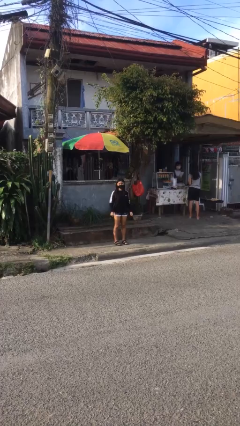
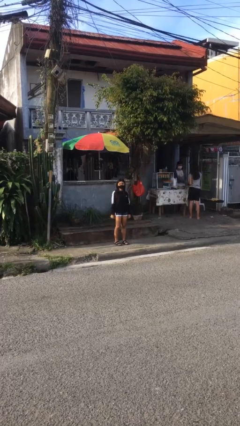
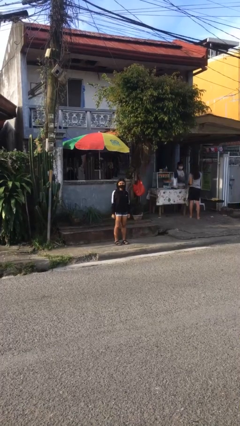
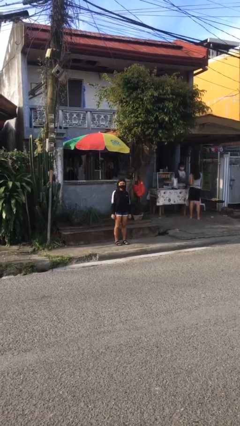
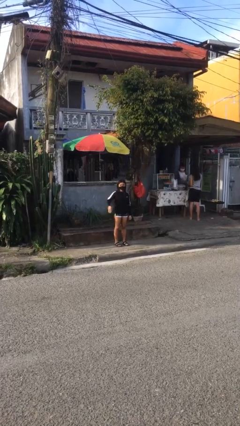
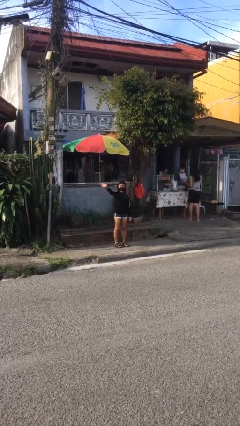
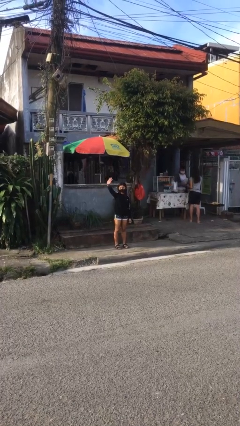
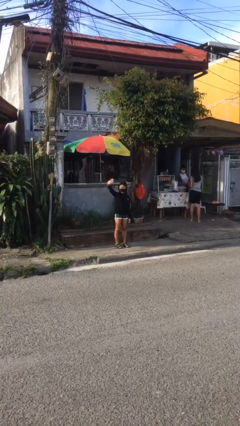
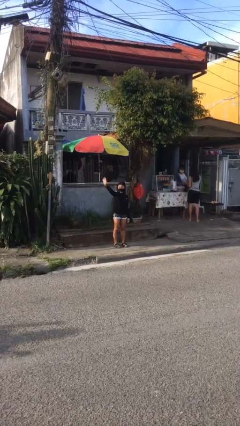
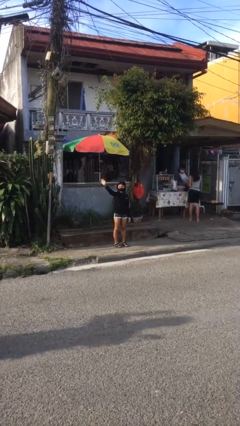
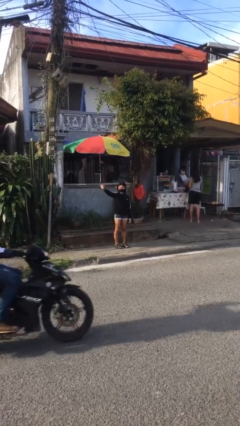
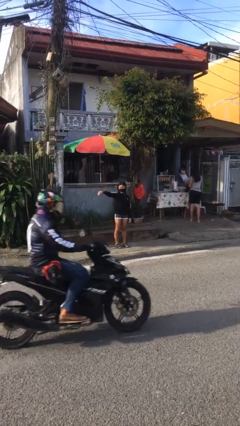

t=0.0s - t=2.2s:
person waves at person

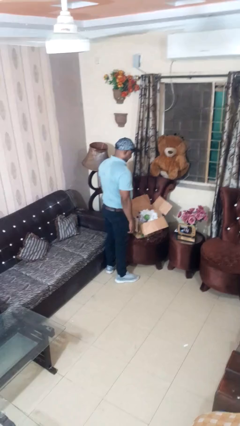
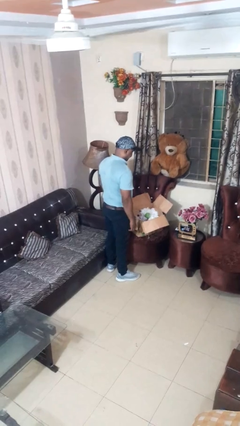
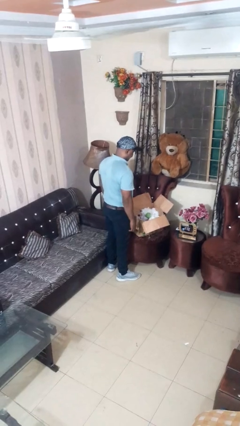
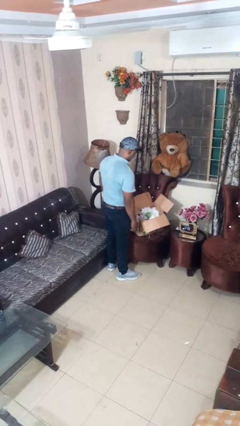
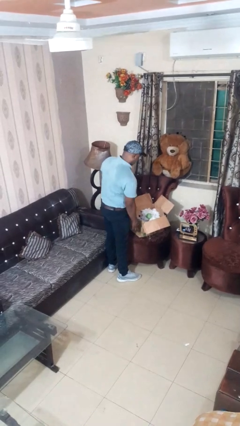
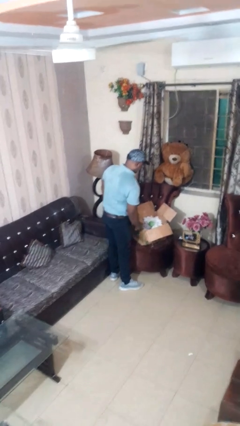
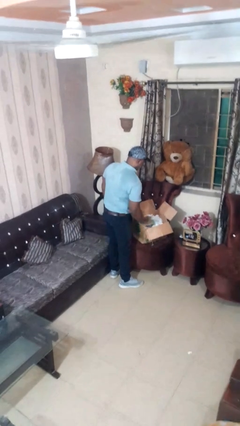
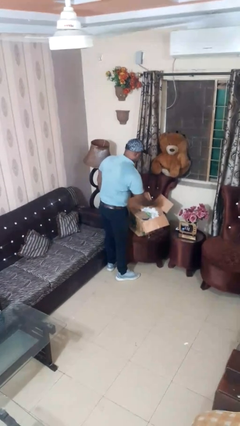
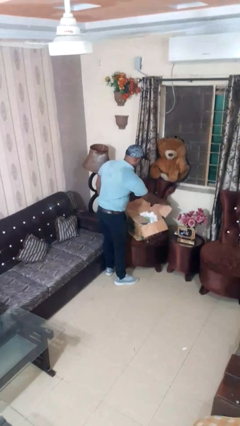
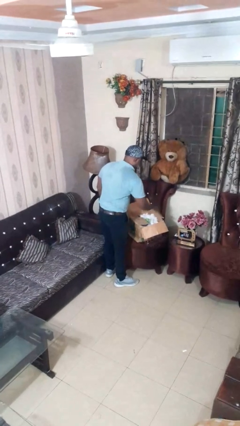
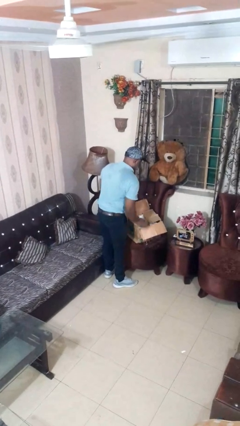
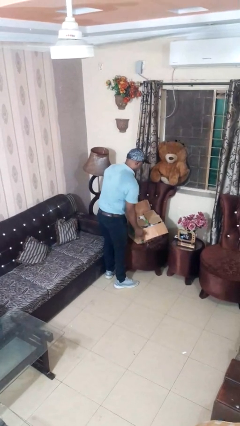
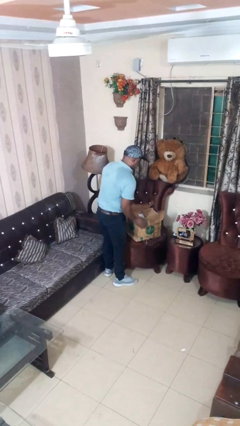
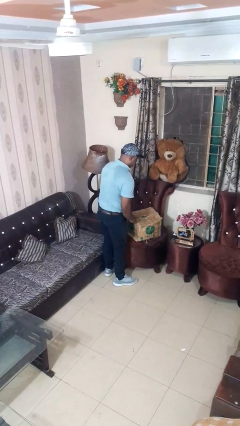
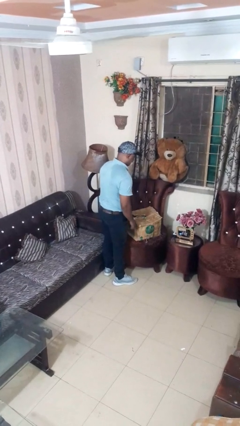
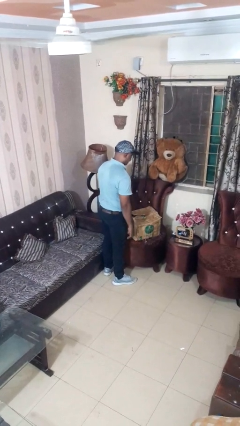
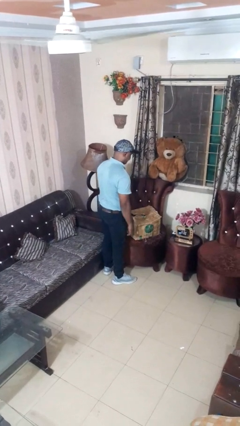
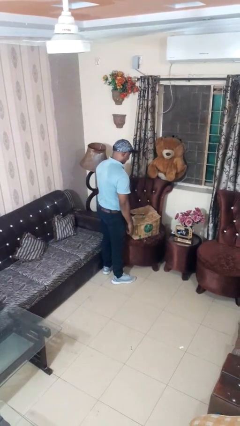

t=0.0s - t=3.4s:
person closes box

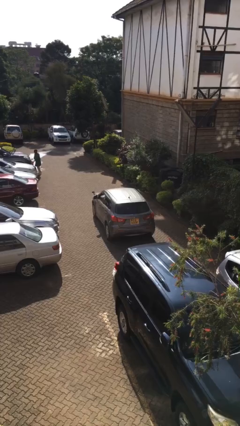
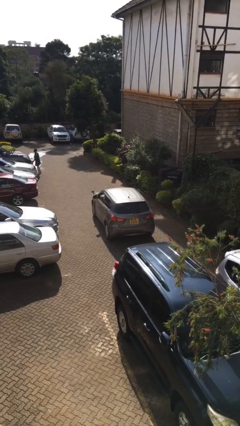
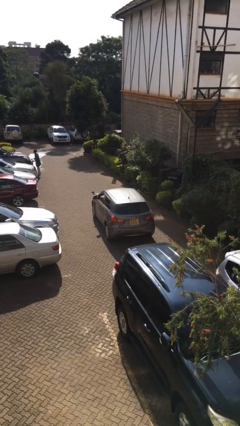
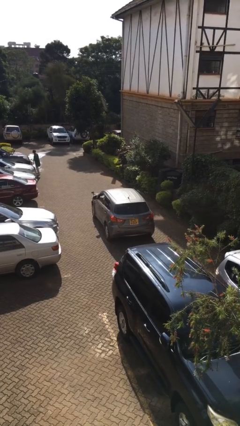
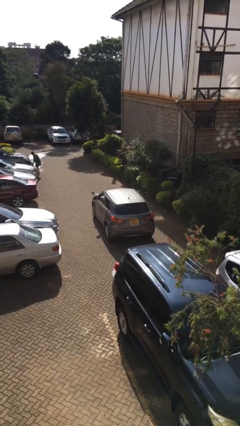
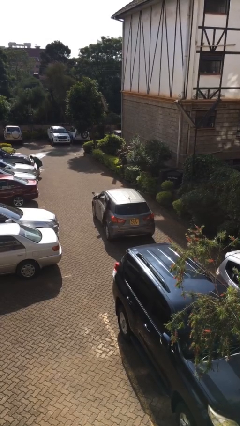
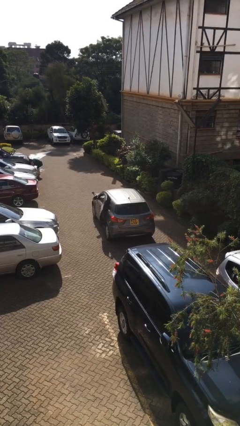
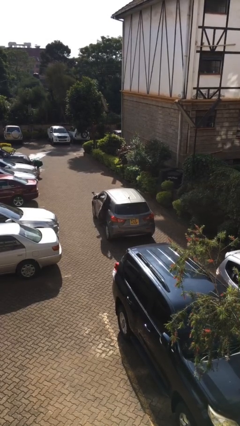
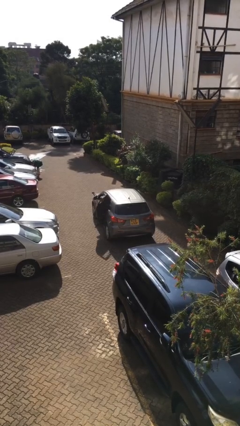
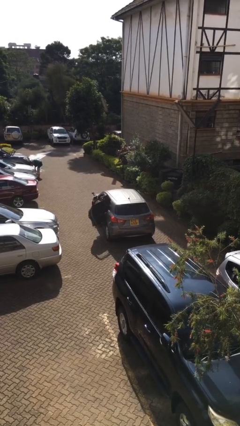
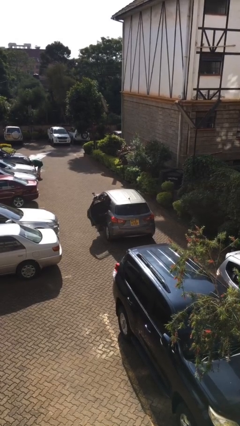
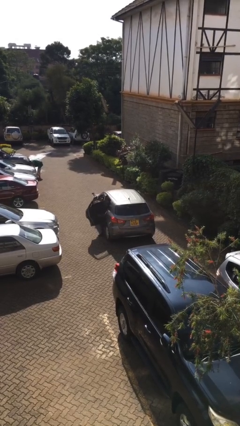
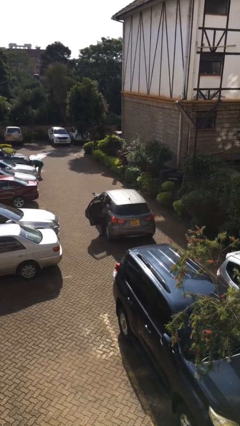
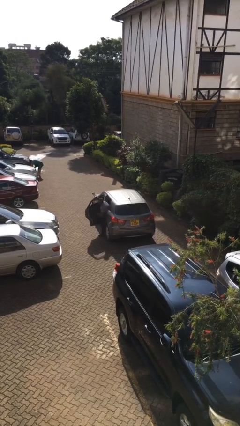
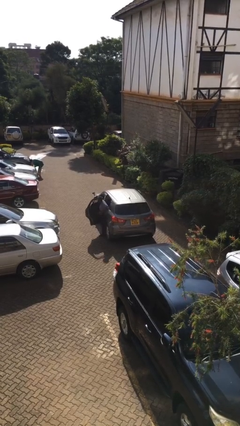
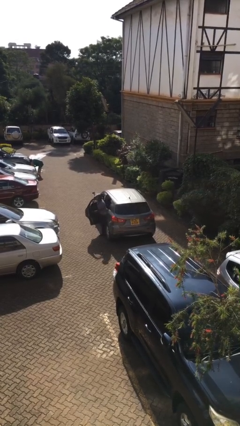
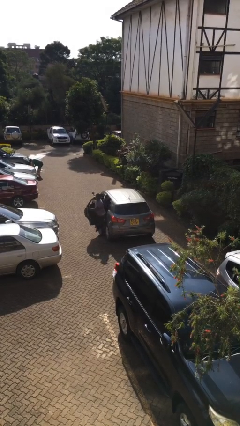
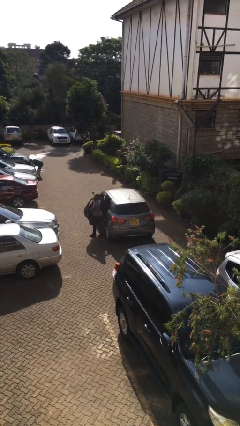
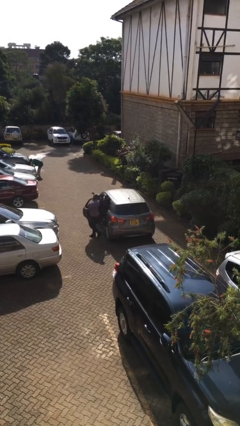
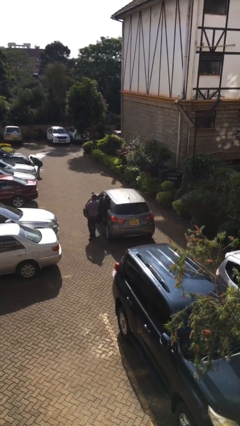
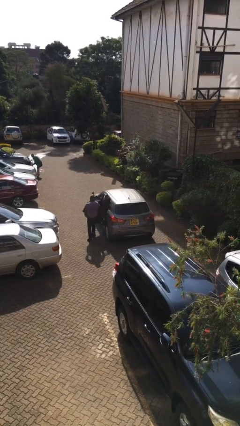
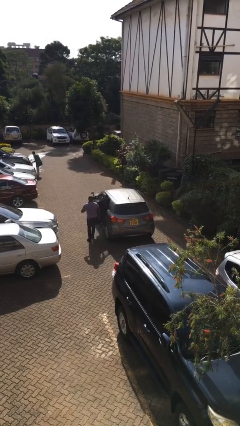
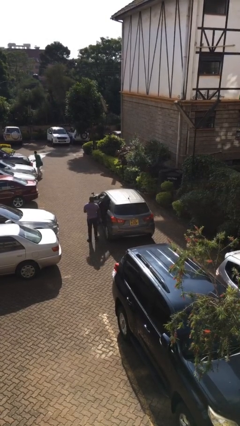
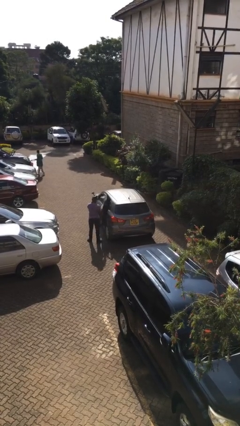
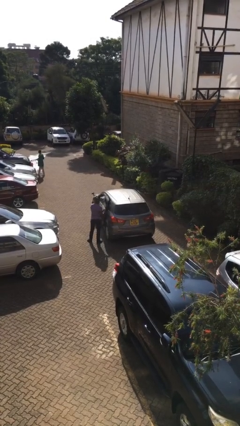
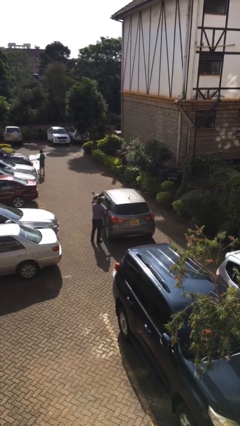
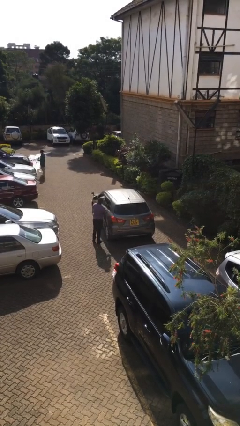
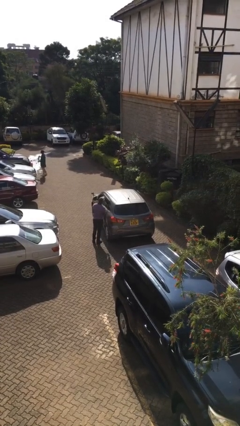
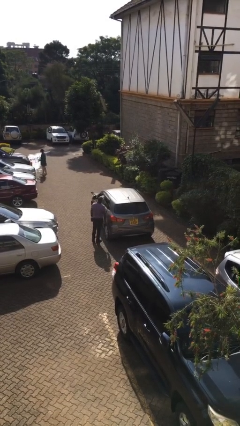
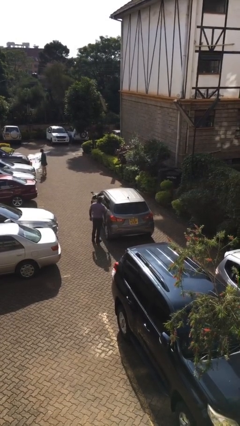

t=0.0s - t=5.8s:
car drops off person

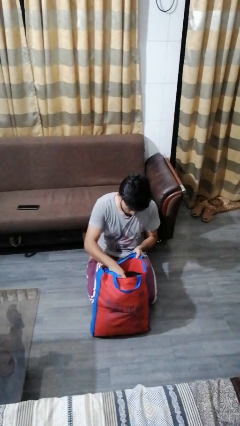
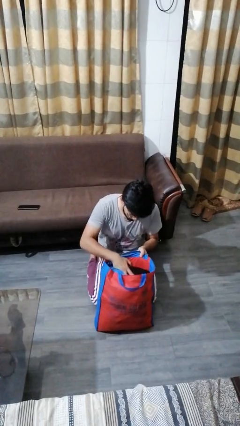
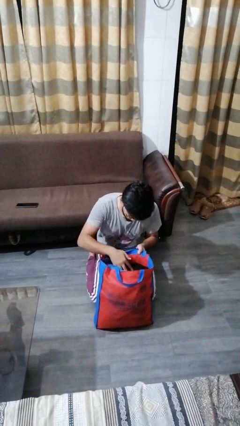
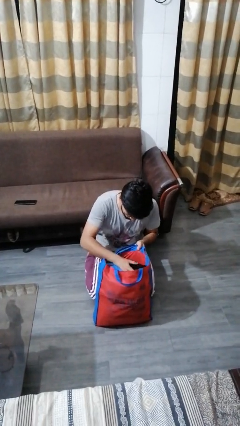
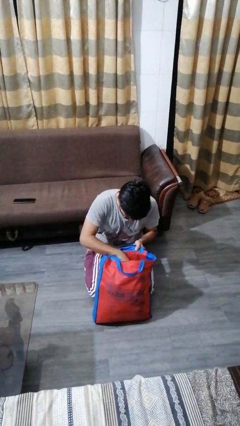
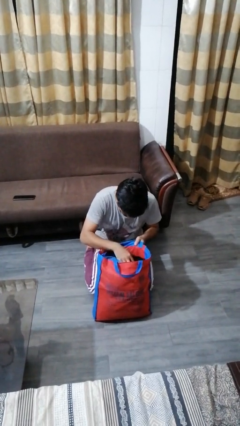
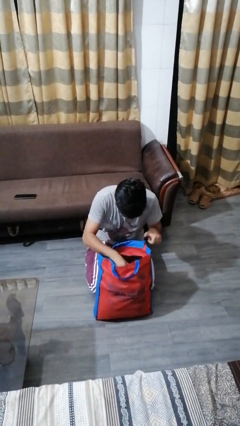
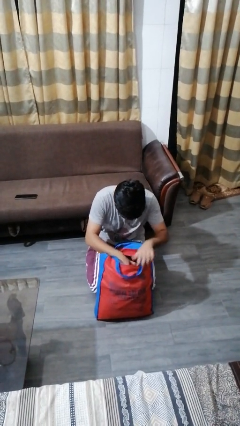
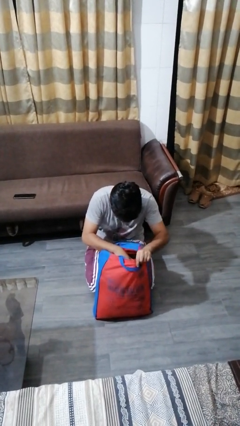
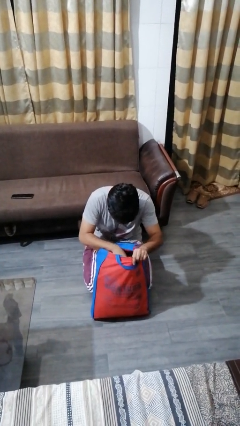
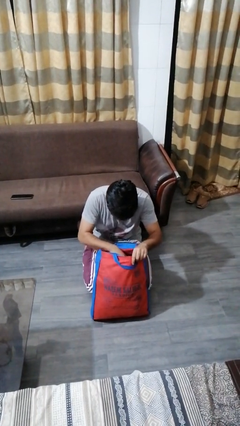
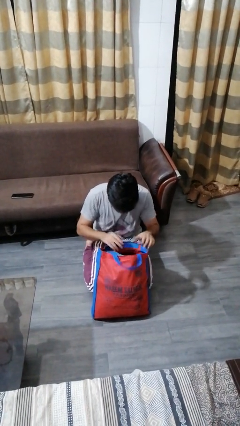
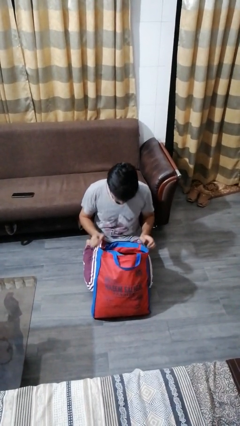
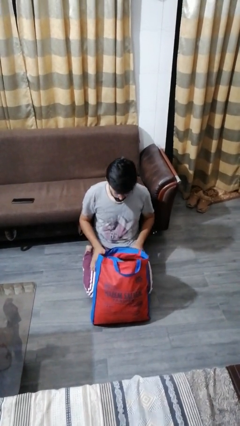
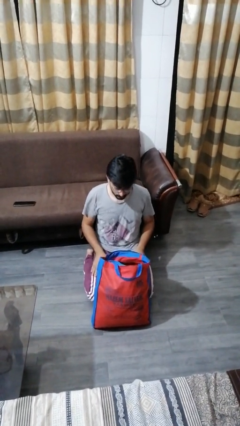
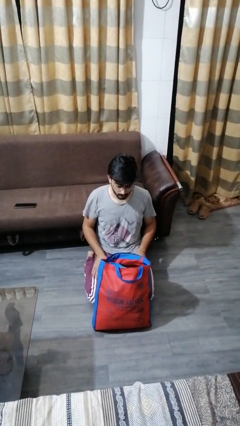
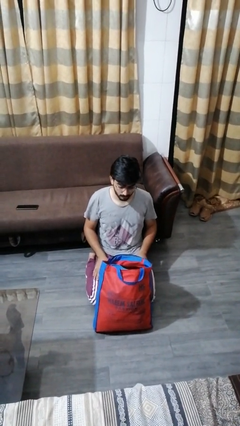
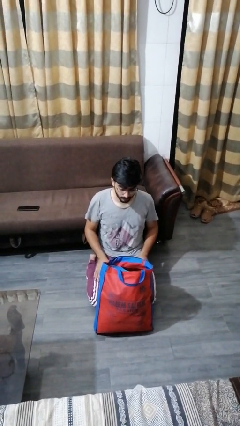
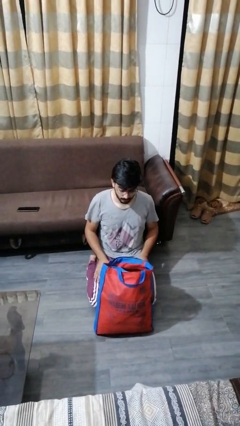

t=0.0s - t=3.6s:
person searches in bag

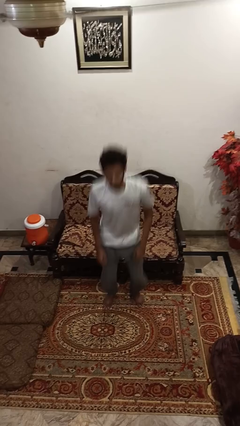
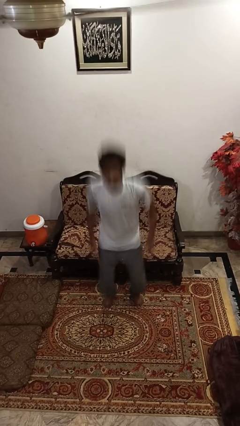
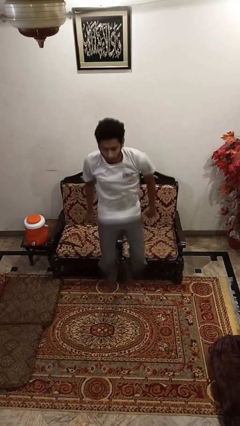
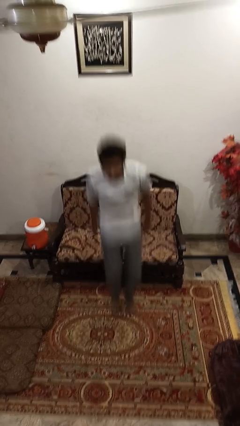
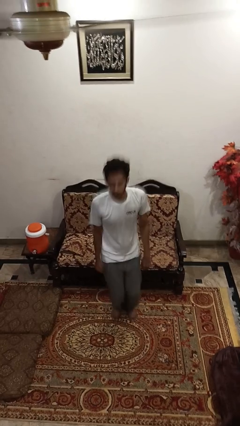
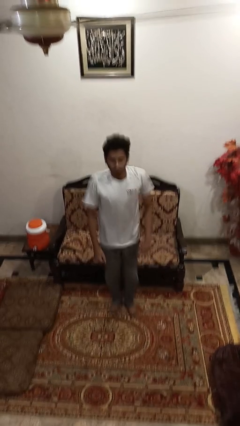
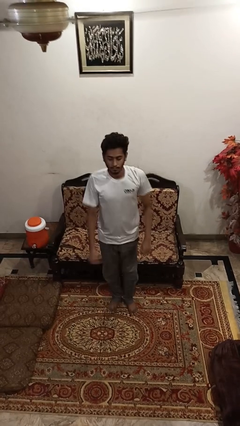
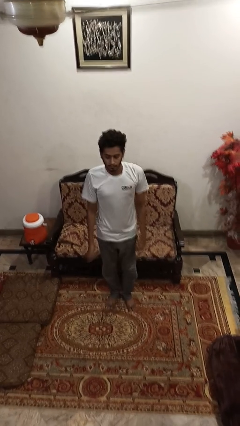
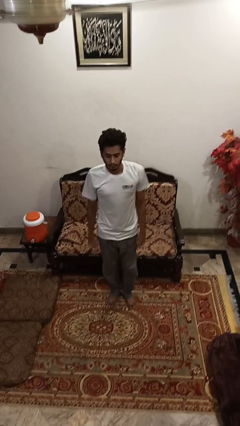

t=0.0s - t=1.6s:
person jumps

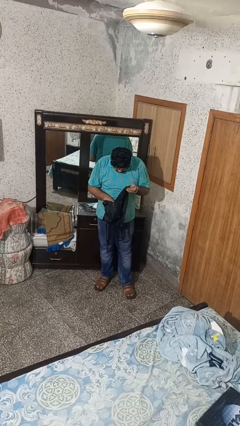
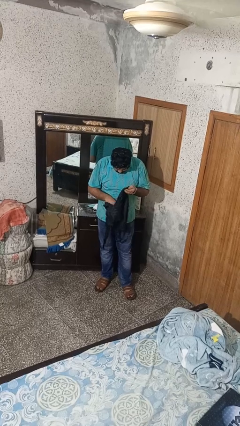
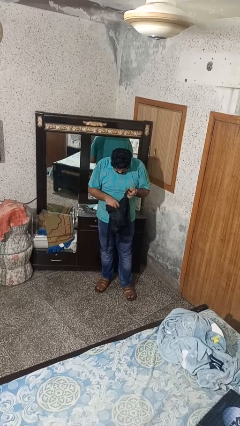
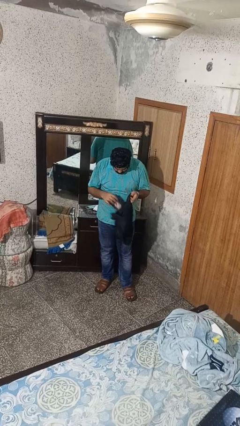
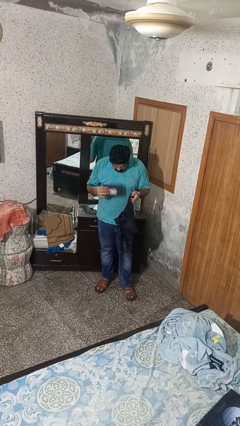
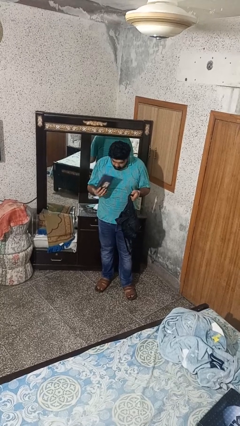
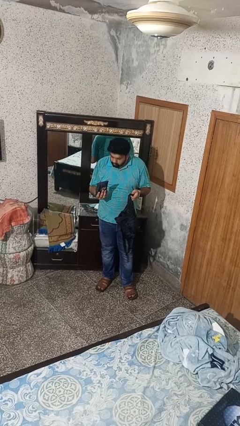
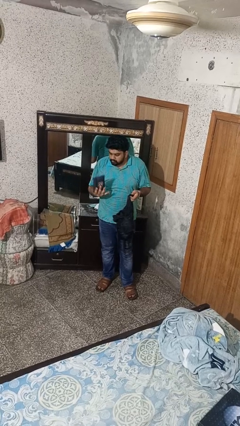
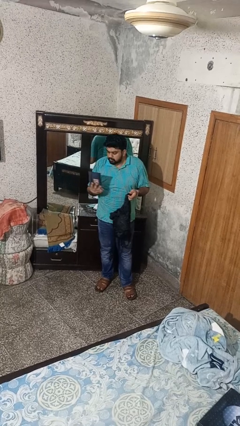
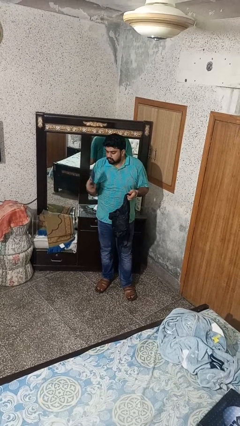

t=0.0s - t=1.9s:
person takes object from backpack
